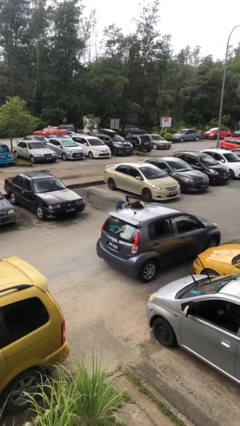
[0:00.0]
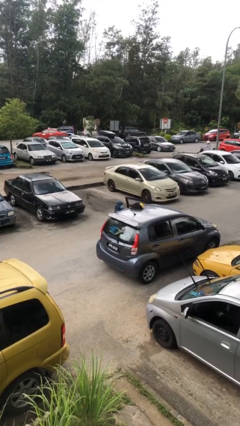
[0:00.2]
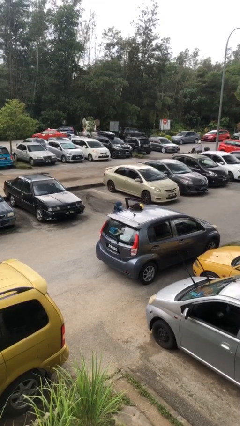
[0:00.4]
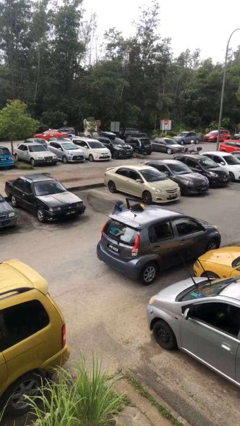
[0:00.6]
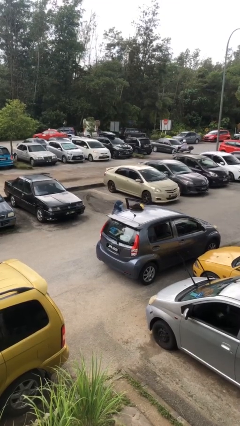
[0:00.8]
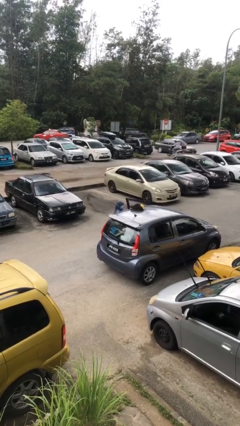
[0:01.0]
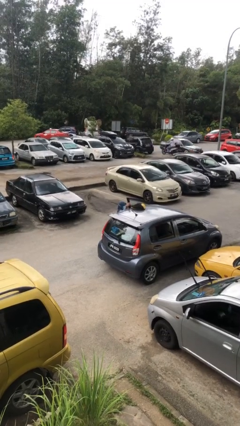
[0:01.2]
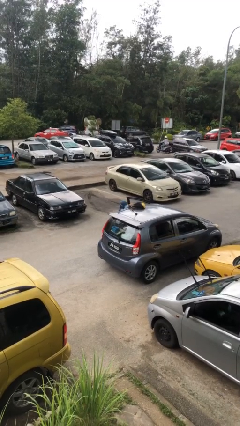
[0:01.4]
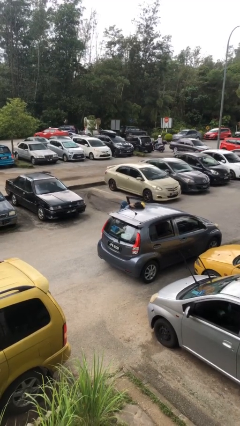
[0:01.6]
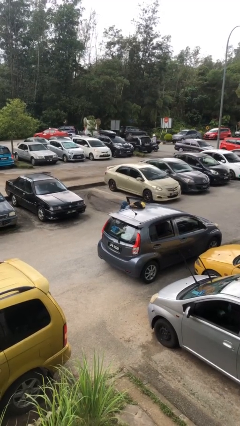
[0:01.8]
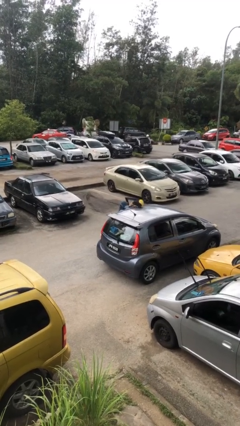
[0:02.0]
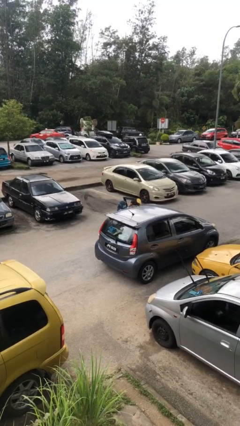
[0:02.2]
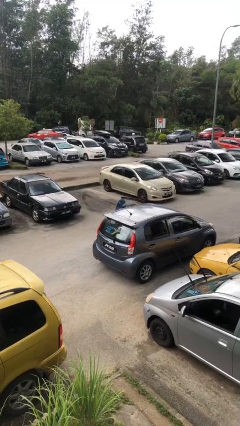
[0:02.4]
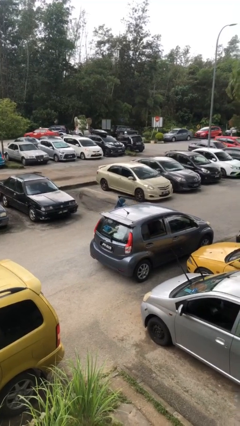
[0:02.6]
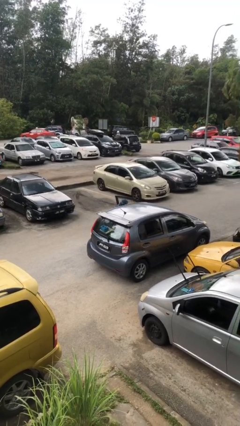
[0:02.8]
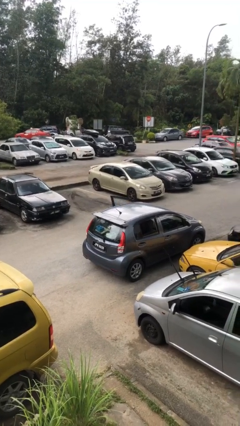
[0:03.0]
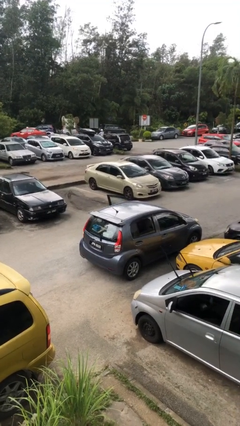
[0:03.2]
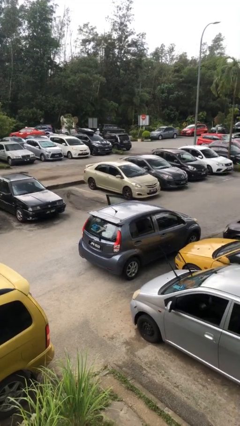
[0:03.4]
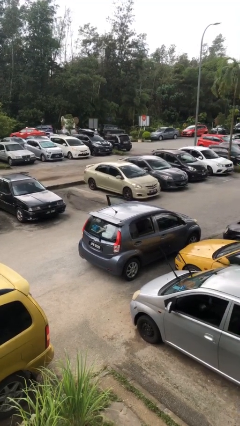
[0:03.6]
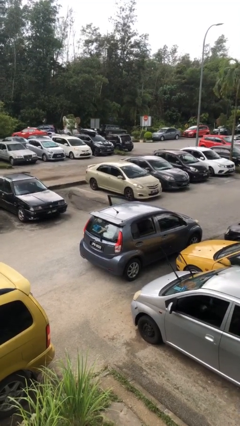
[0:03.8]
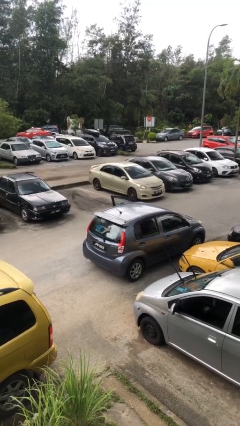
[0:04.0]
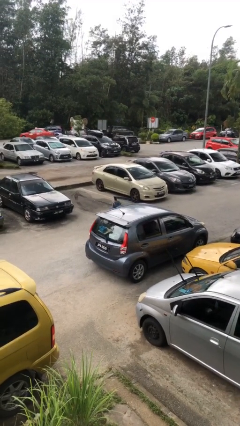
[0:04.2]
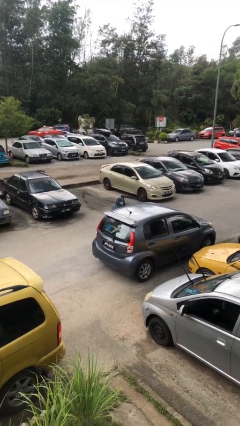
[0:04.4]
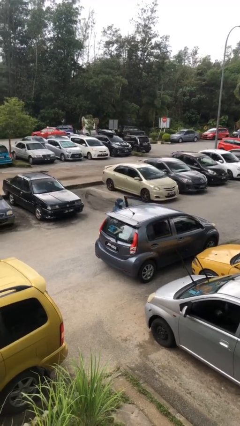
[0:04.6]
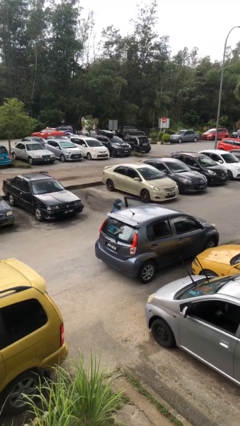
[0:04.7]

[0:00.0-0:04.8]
person loads car

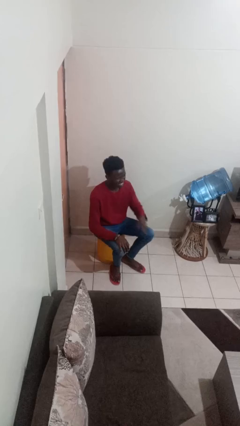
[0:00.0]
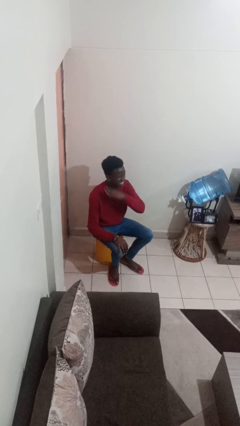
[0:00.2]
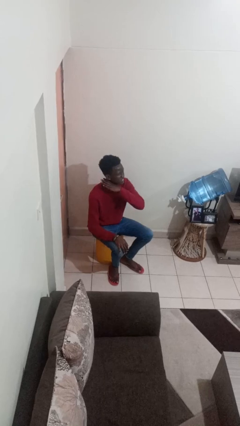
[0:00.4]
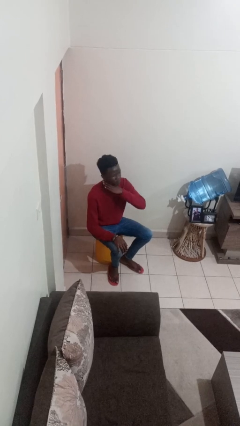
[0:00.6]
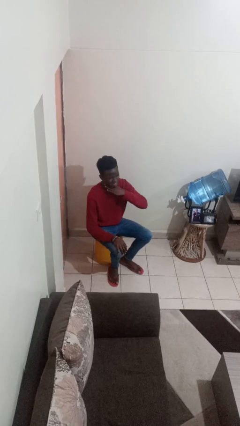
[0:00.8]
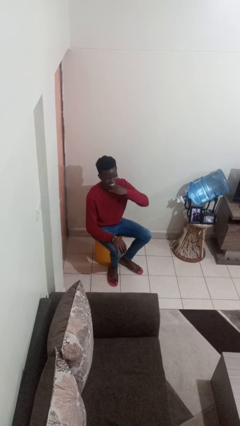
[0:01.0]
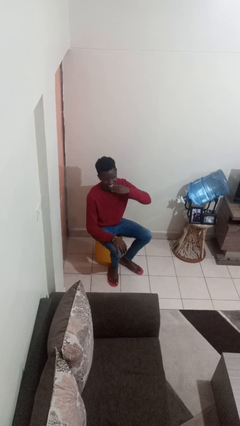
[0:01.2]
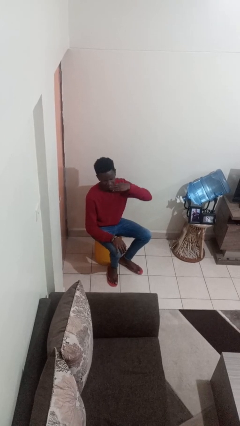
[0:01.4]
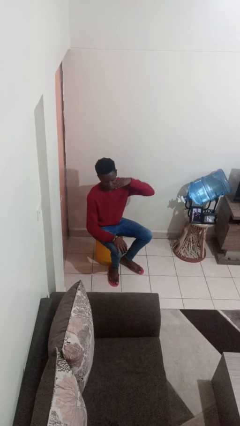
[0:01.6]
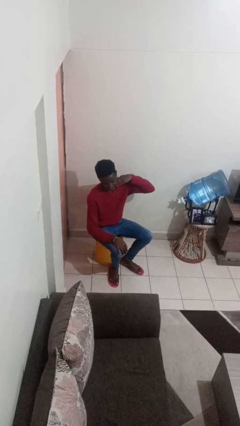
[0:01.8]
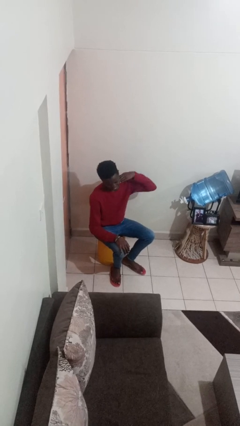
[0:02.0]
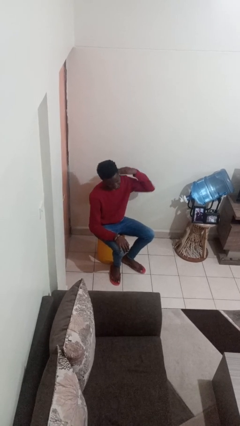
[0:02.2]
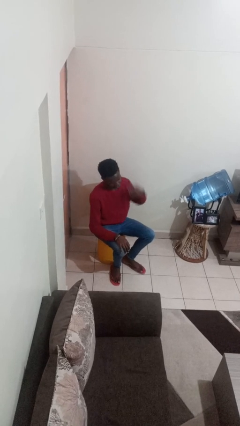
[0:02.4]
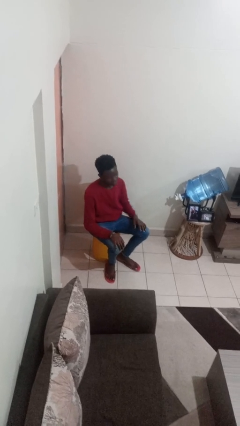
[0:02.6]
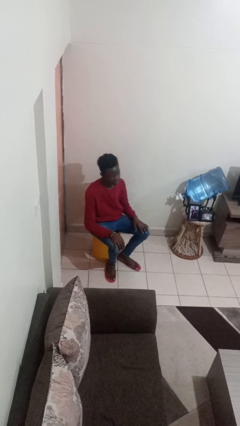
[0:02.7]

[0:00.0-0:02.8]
person gestures cut

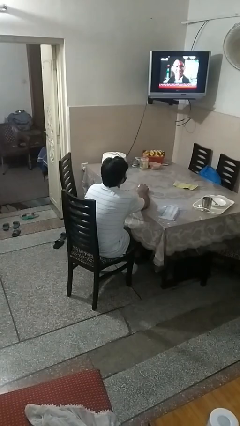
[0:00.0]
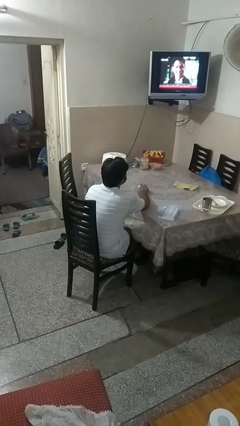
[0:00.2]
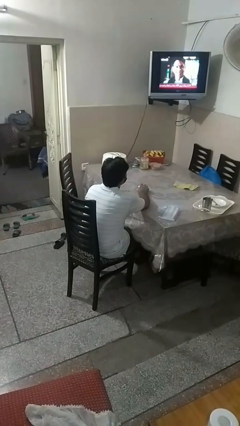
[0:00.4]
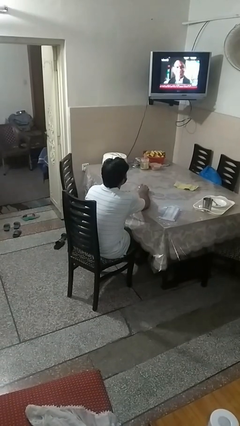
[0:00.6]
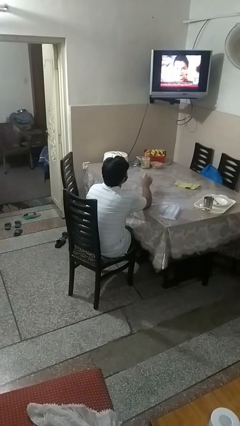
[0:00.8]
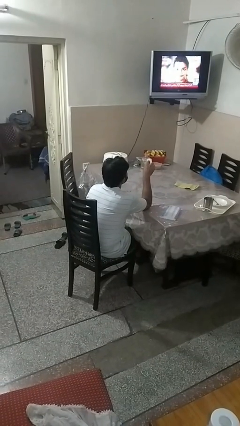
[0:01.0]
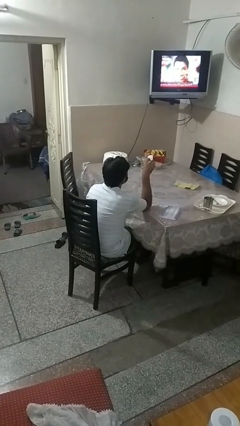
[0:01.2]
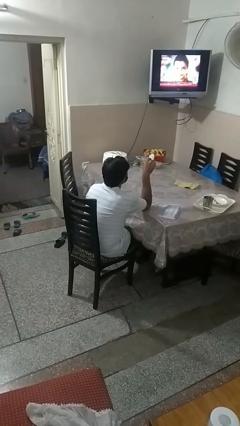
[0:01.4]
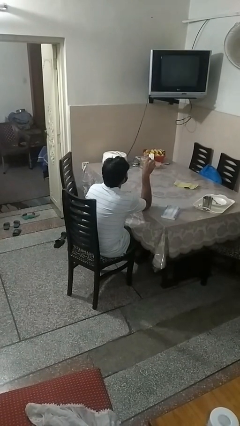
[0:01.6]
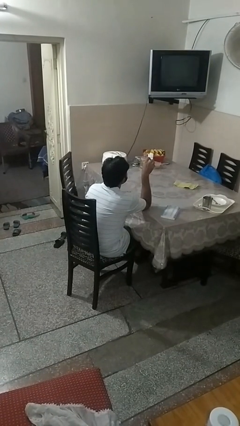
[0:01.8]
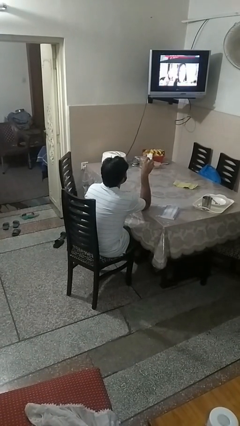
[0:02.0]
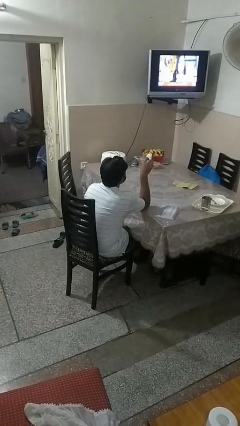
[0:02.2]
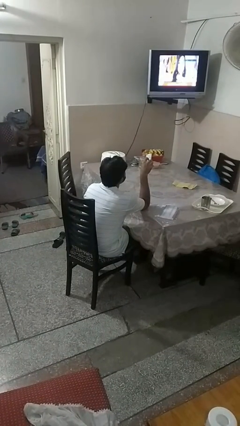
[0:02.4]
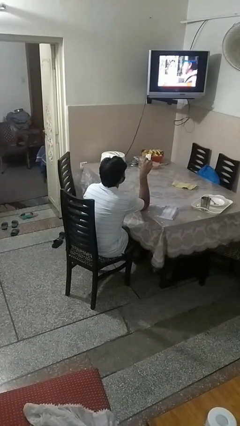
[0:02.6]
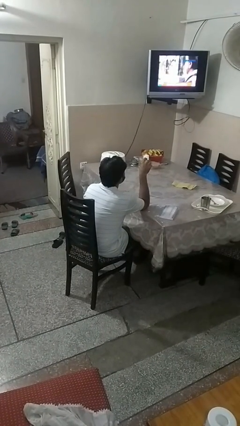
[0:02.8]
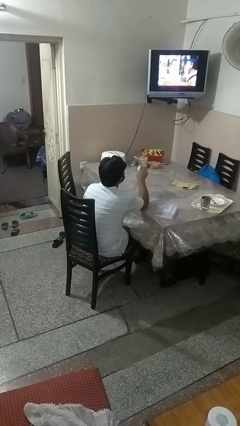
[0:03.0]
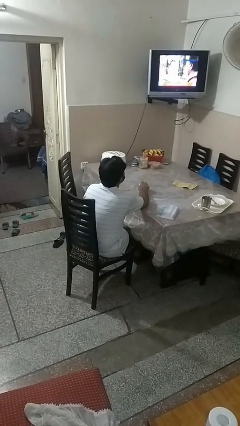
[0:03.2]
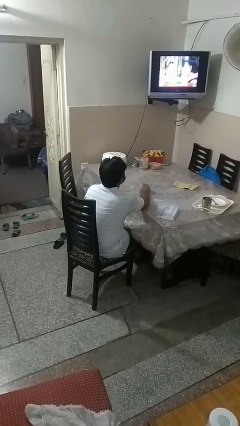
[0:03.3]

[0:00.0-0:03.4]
person uses television remote

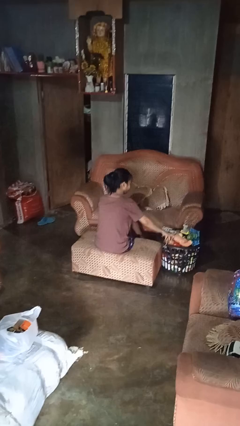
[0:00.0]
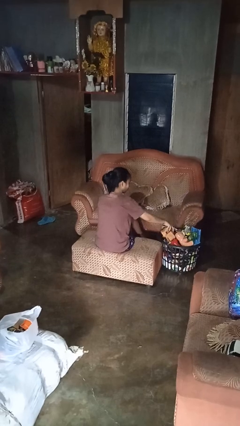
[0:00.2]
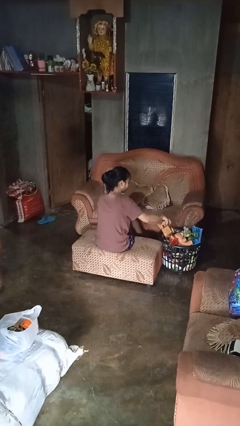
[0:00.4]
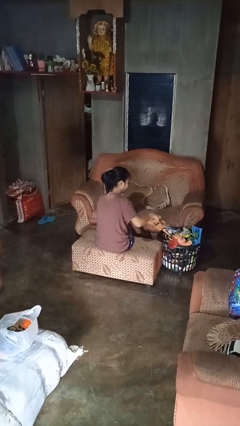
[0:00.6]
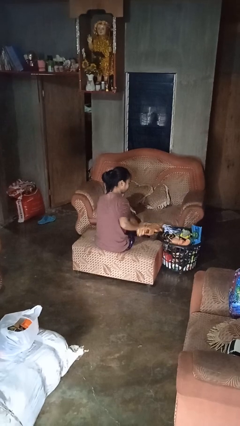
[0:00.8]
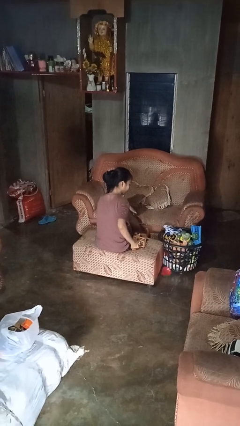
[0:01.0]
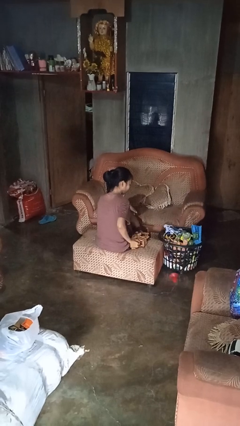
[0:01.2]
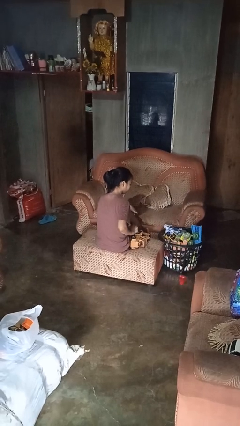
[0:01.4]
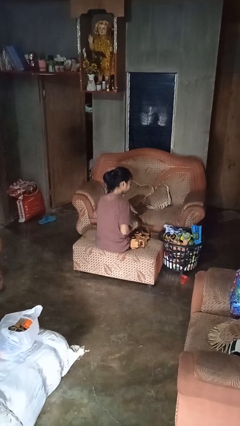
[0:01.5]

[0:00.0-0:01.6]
person takes object from basket

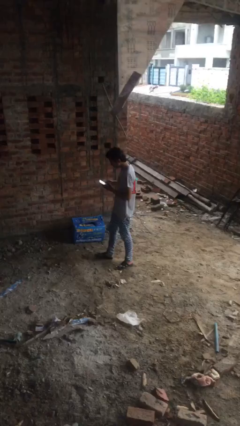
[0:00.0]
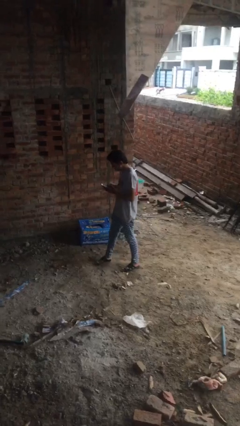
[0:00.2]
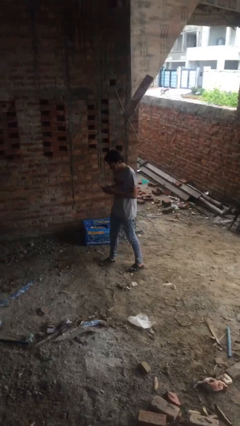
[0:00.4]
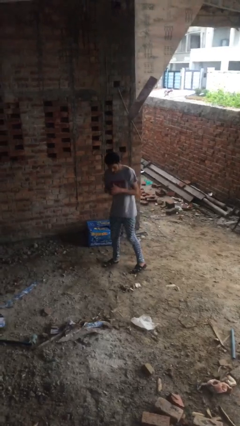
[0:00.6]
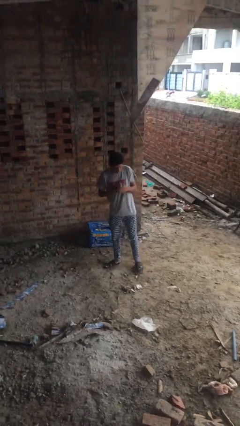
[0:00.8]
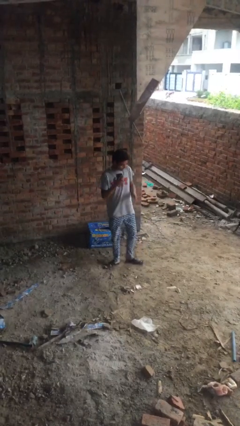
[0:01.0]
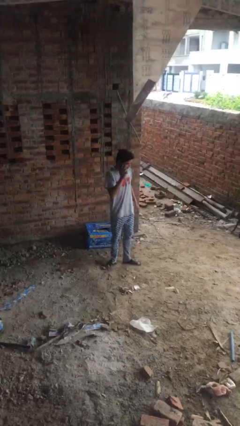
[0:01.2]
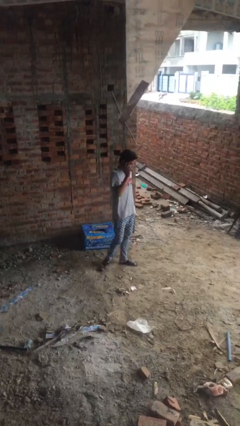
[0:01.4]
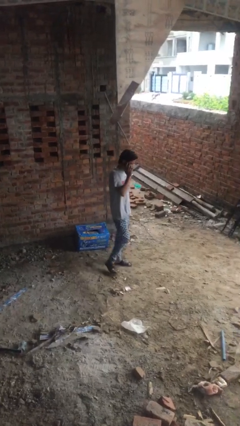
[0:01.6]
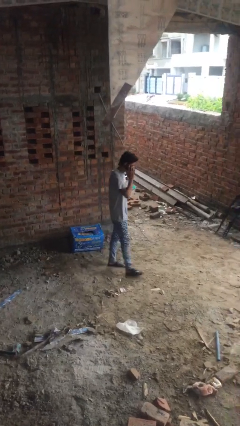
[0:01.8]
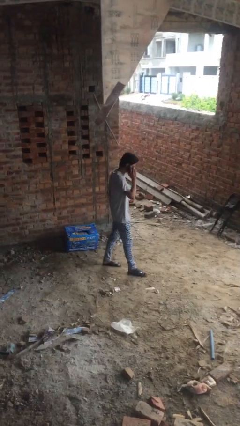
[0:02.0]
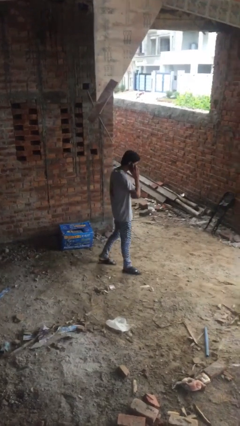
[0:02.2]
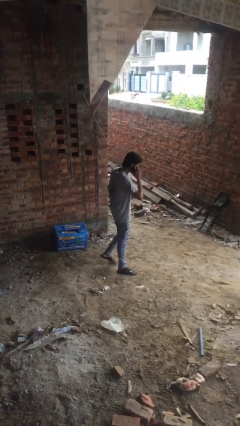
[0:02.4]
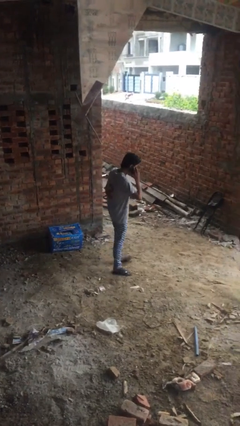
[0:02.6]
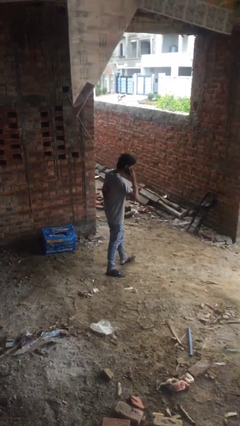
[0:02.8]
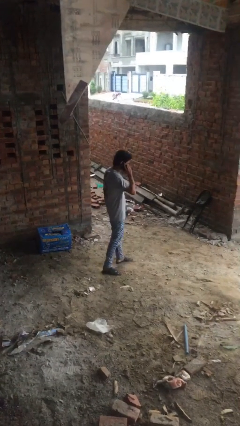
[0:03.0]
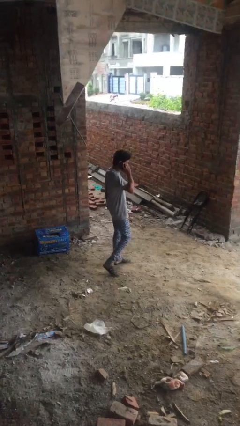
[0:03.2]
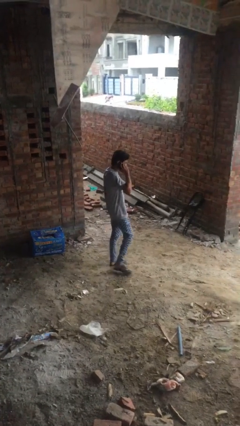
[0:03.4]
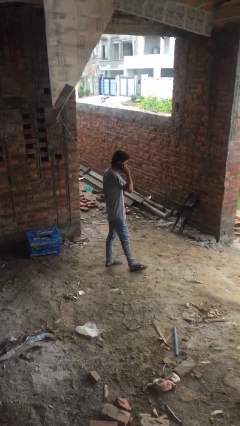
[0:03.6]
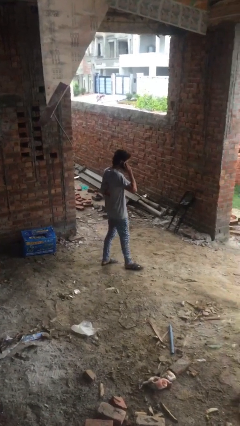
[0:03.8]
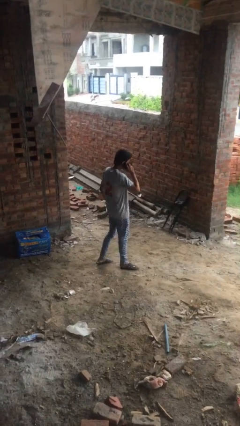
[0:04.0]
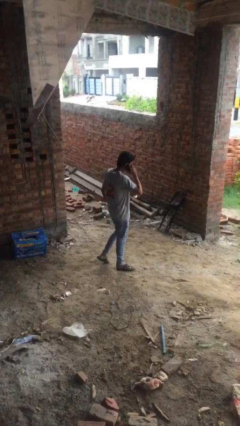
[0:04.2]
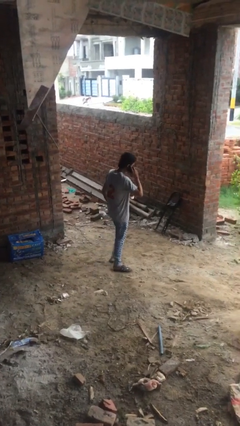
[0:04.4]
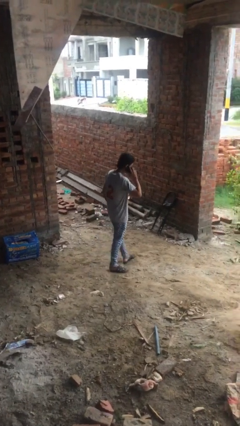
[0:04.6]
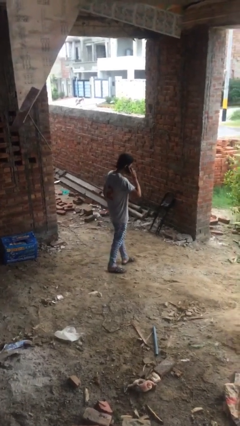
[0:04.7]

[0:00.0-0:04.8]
person talks on phone

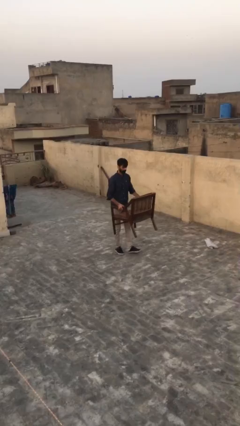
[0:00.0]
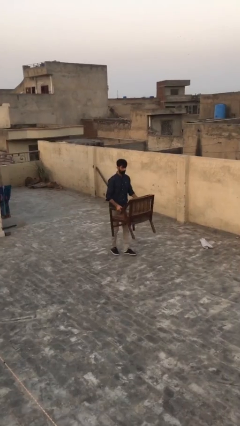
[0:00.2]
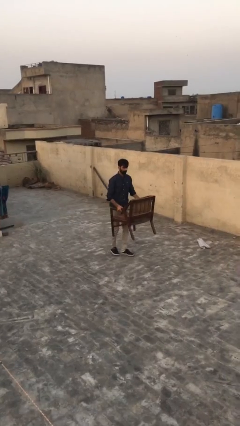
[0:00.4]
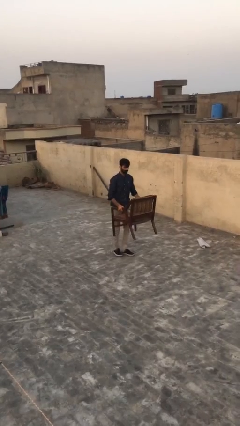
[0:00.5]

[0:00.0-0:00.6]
person puts down object on floor
